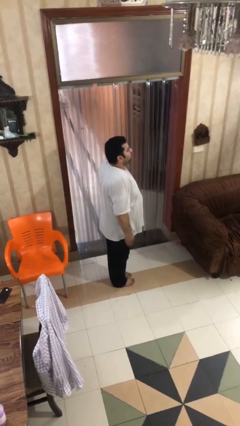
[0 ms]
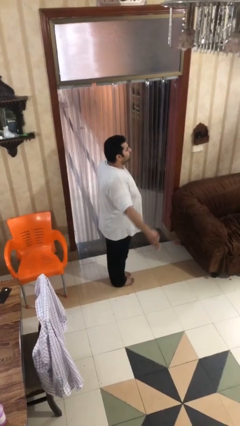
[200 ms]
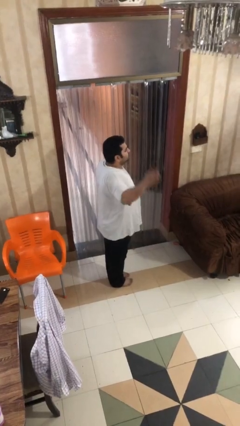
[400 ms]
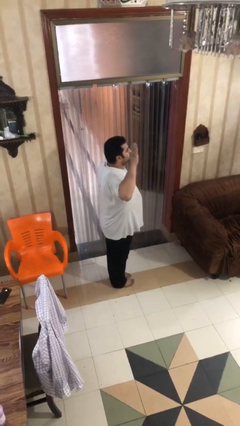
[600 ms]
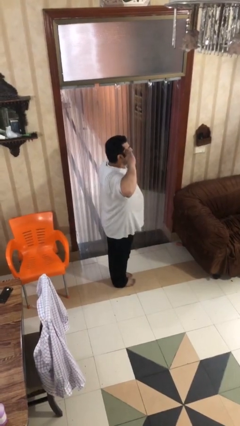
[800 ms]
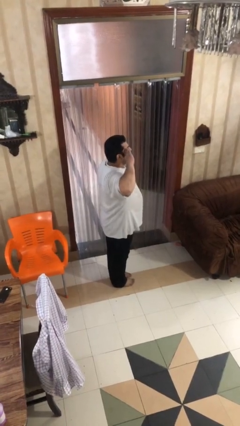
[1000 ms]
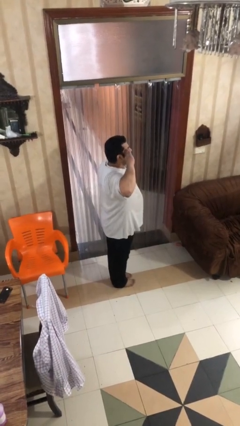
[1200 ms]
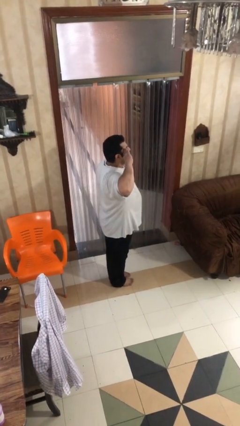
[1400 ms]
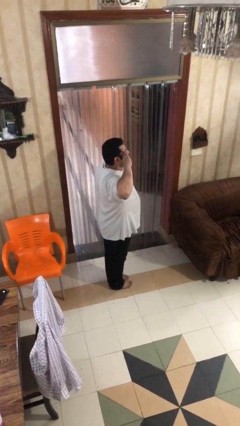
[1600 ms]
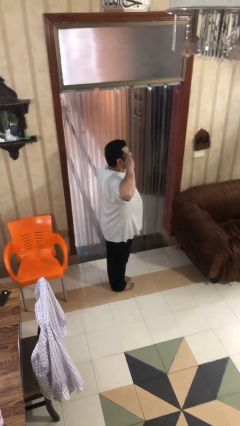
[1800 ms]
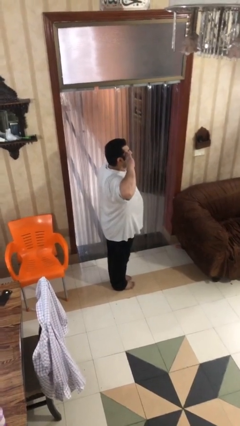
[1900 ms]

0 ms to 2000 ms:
person salutes

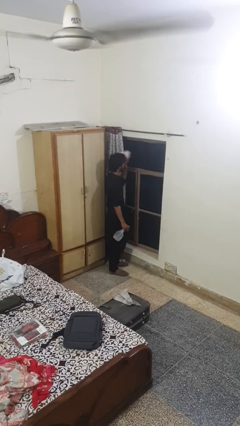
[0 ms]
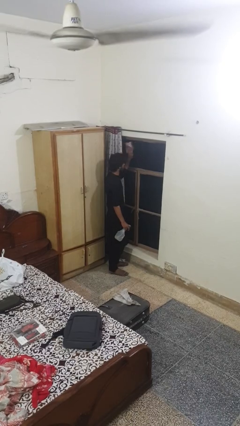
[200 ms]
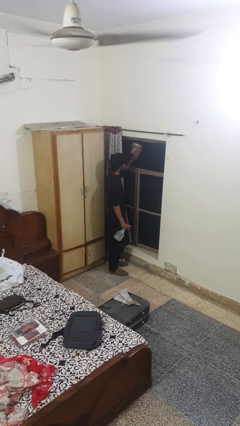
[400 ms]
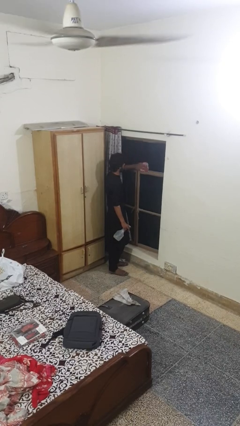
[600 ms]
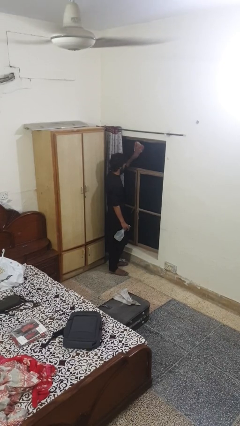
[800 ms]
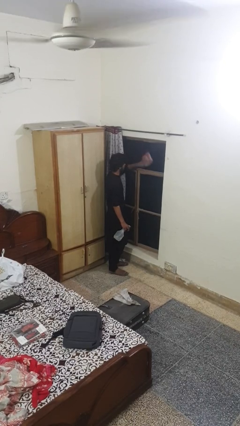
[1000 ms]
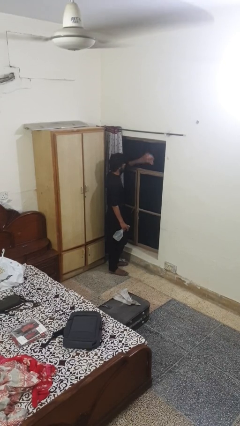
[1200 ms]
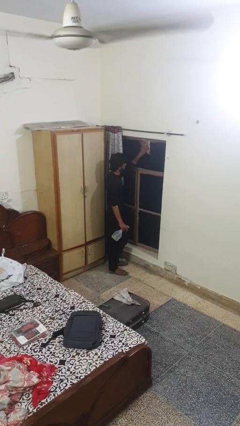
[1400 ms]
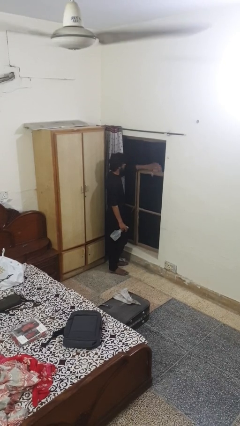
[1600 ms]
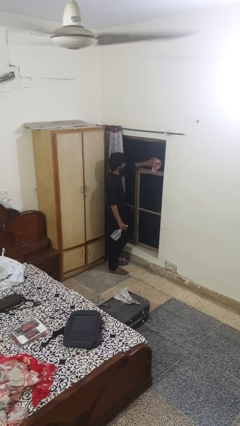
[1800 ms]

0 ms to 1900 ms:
person washes window

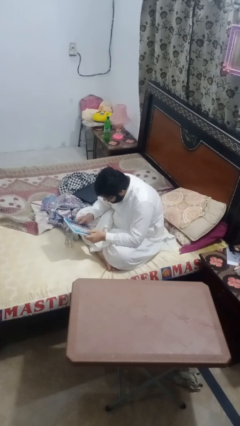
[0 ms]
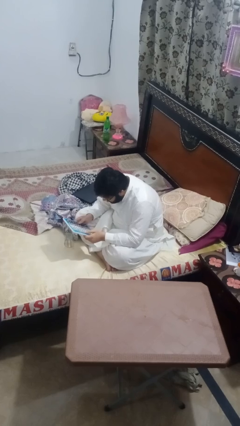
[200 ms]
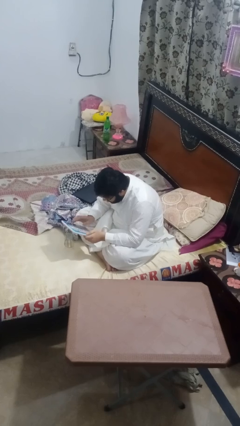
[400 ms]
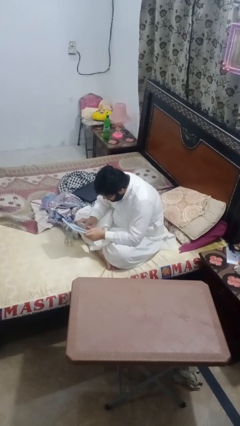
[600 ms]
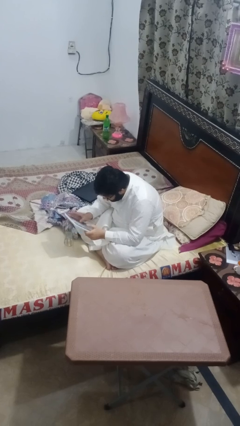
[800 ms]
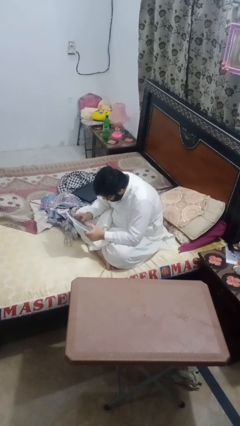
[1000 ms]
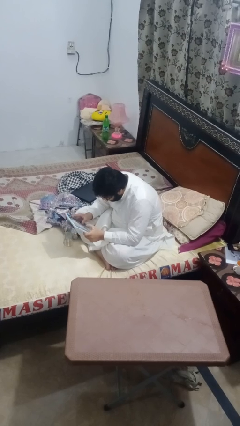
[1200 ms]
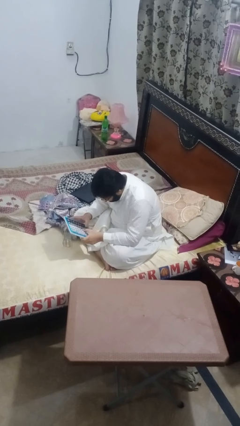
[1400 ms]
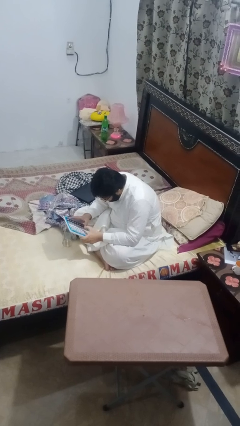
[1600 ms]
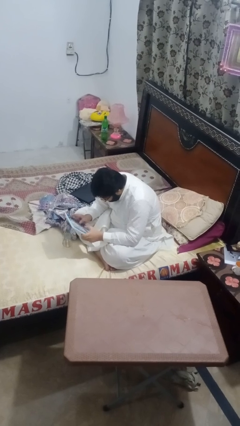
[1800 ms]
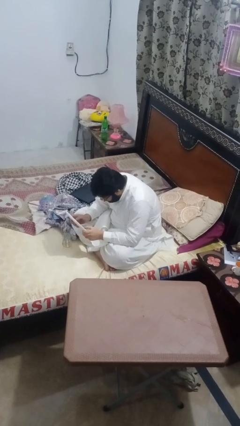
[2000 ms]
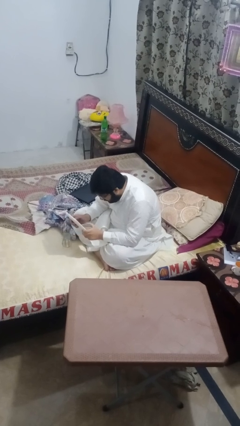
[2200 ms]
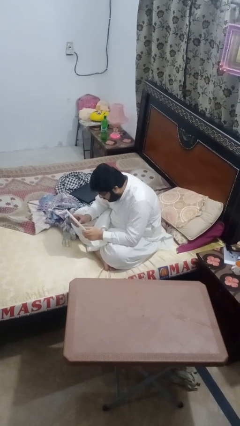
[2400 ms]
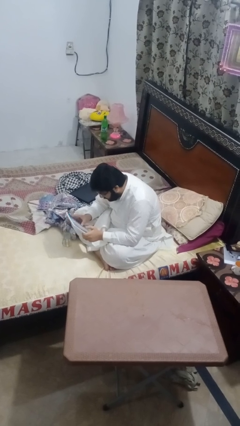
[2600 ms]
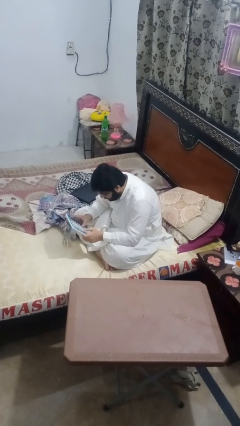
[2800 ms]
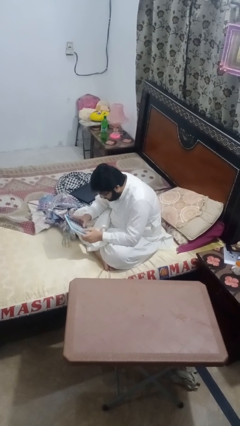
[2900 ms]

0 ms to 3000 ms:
person interacts with tablet

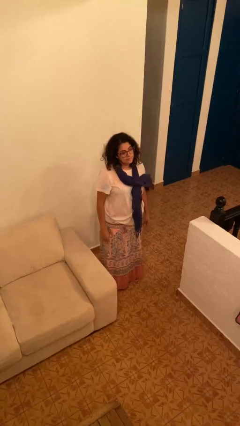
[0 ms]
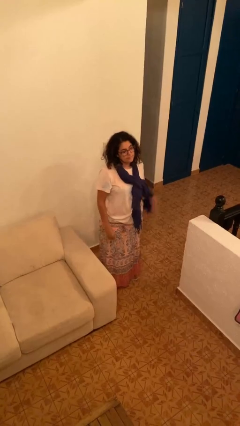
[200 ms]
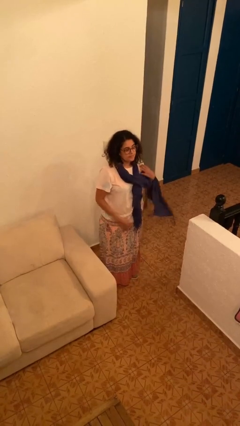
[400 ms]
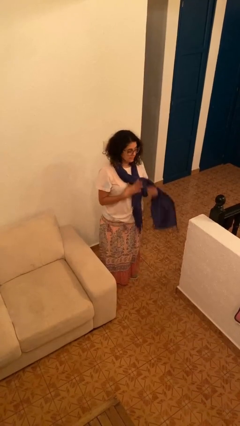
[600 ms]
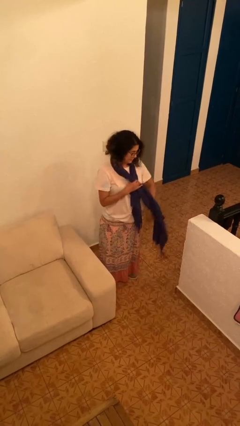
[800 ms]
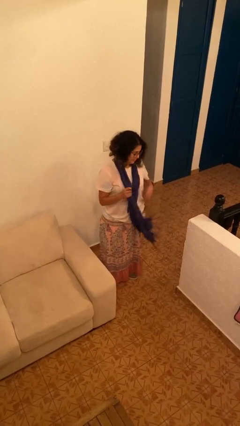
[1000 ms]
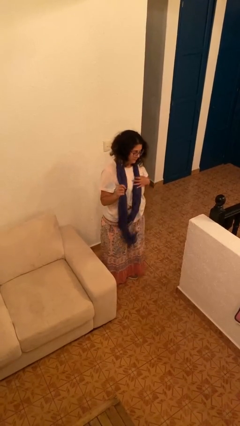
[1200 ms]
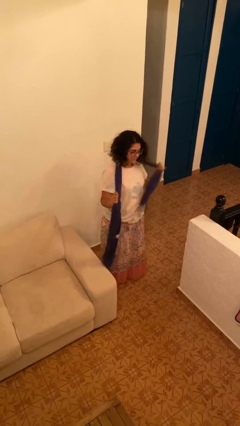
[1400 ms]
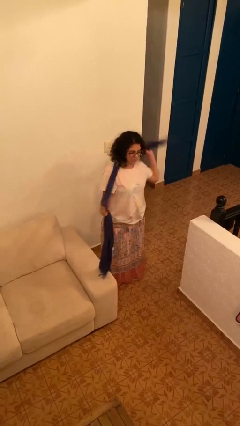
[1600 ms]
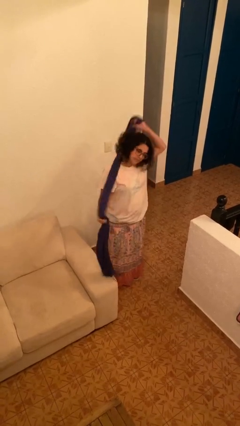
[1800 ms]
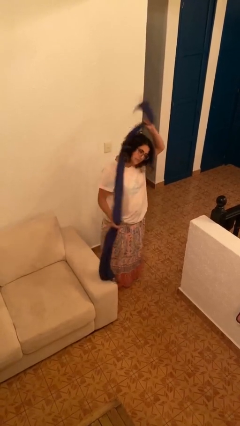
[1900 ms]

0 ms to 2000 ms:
person takes off scarf

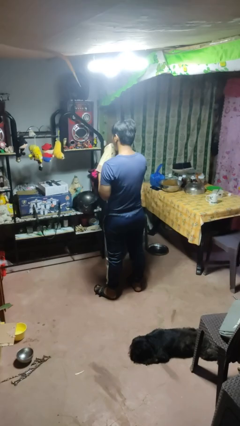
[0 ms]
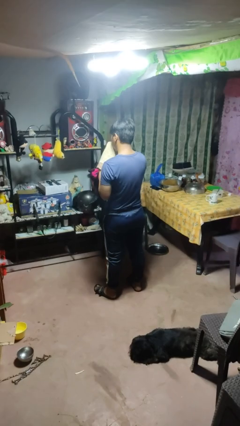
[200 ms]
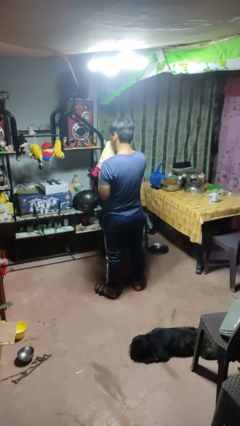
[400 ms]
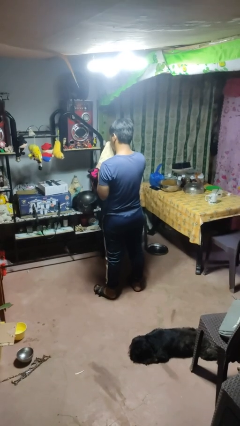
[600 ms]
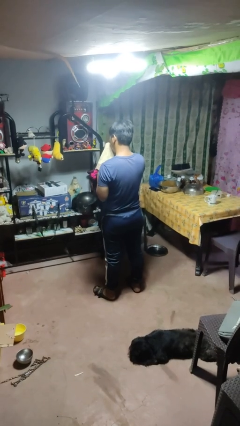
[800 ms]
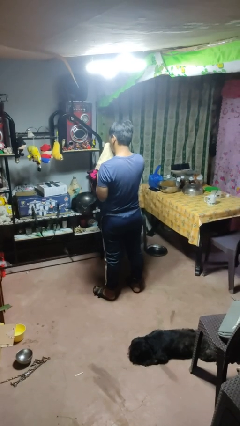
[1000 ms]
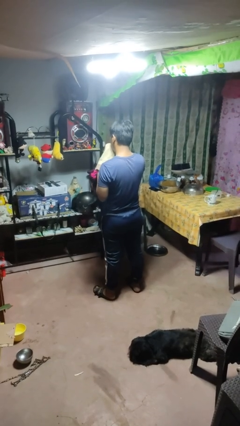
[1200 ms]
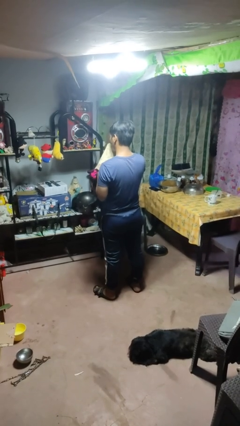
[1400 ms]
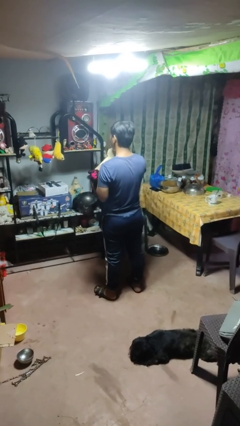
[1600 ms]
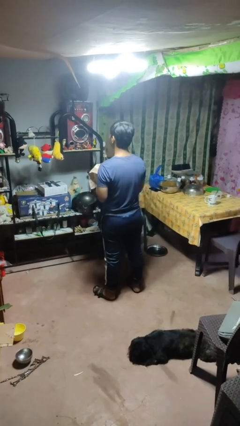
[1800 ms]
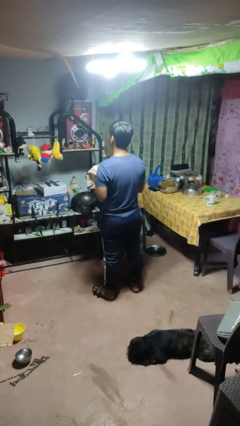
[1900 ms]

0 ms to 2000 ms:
person blows nose

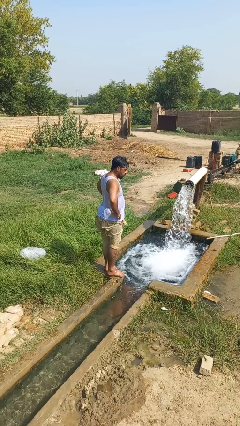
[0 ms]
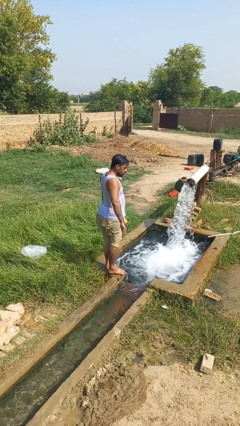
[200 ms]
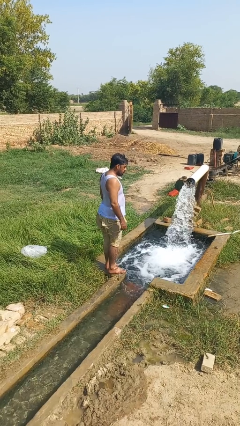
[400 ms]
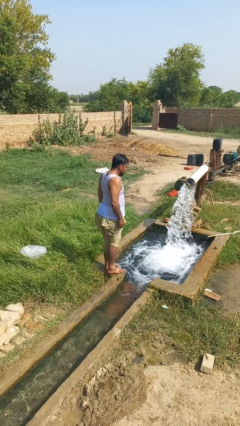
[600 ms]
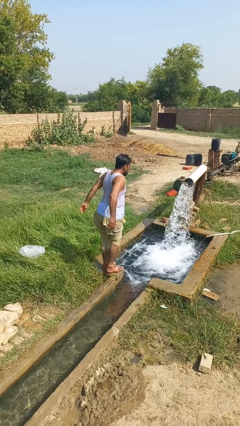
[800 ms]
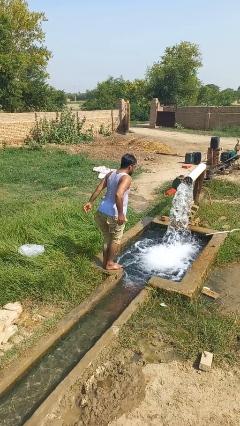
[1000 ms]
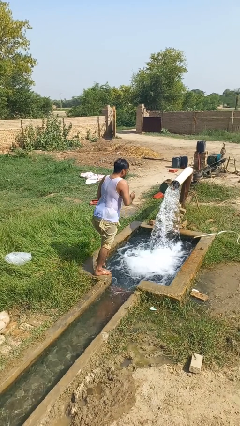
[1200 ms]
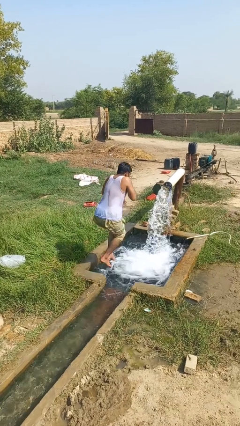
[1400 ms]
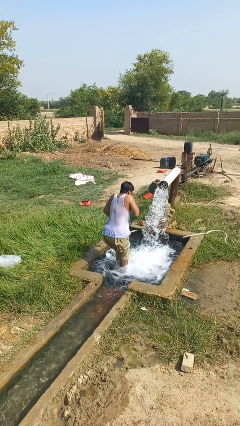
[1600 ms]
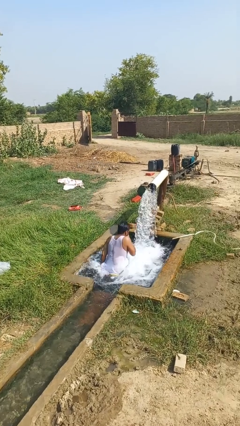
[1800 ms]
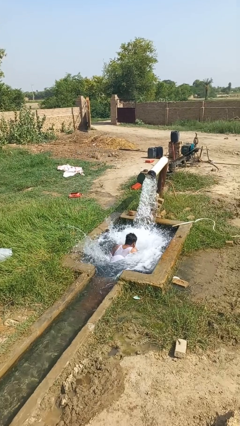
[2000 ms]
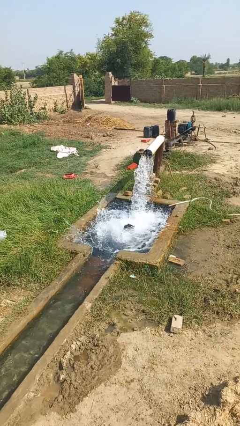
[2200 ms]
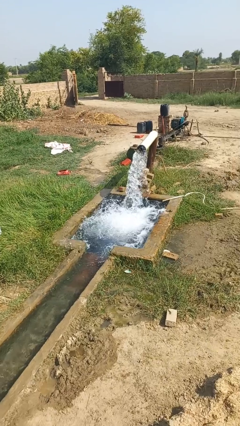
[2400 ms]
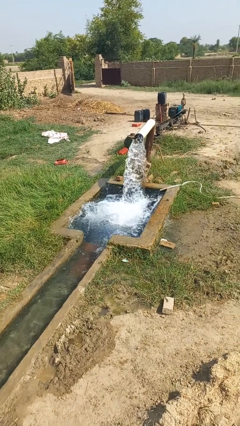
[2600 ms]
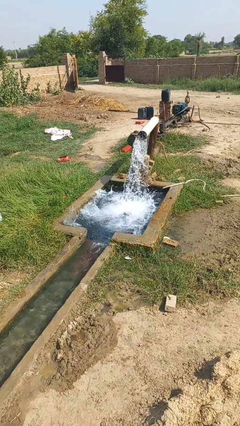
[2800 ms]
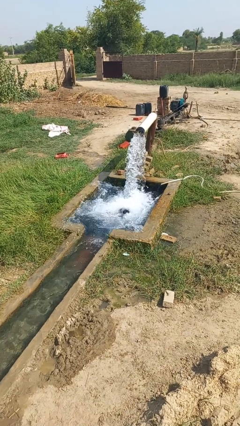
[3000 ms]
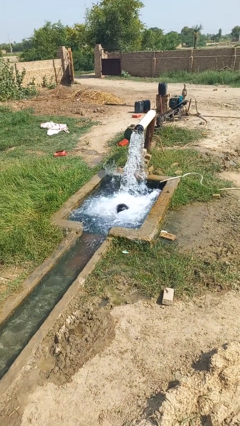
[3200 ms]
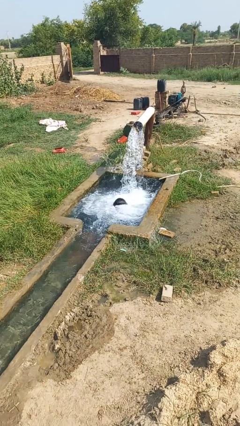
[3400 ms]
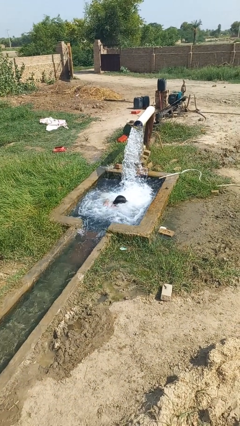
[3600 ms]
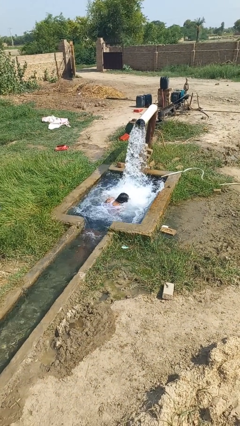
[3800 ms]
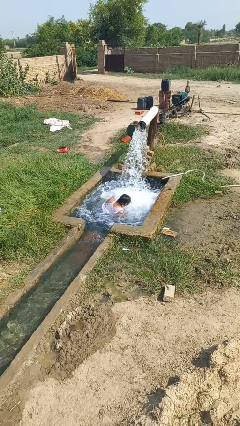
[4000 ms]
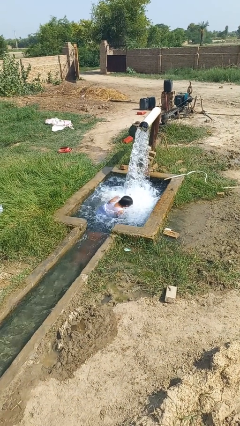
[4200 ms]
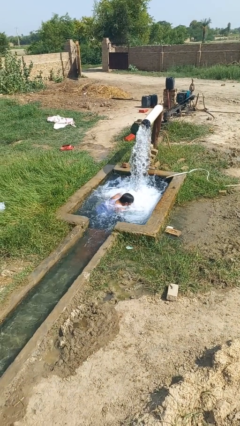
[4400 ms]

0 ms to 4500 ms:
person jumps into pool

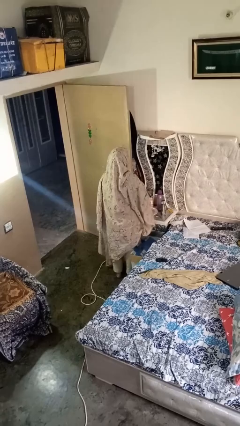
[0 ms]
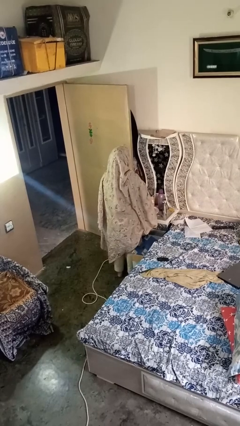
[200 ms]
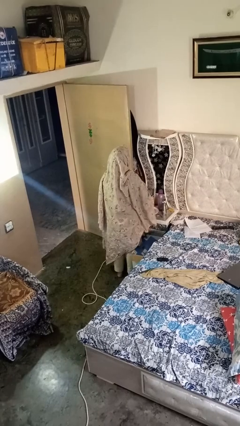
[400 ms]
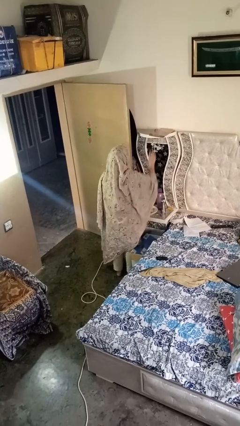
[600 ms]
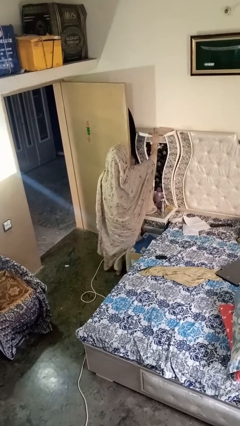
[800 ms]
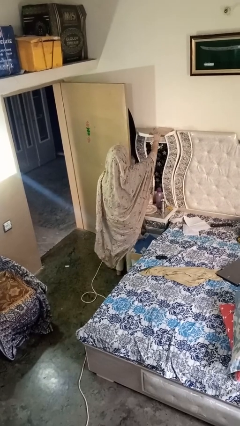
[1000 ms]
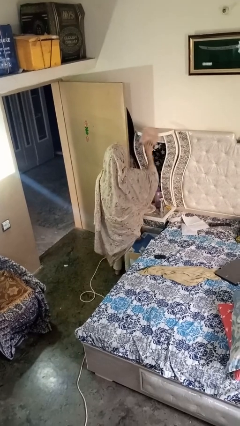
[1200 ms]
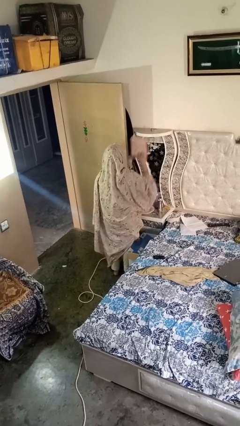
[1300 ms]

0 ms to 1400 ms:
person picks up object from shelf

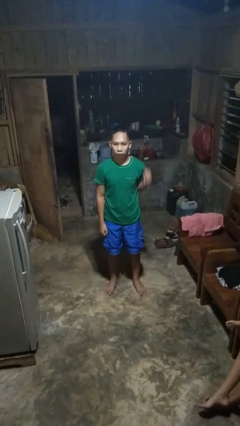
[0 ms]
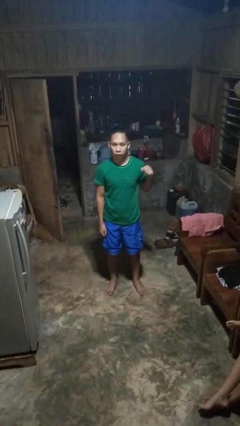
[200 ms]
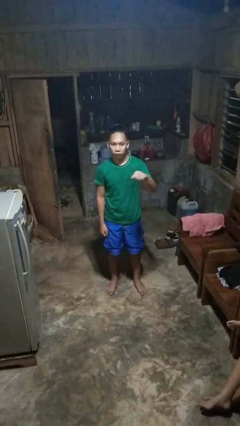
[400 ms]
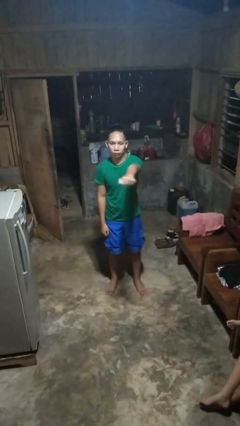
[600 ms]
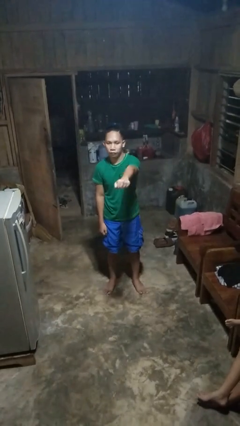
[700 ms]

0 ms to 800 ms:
person punches
